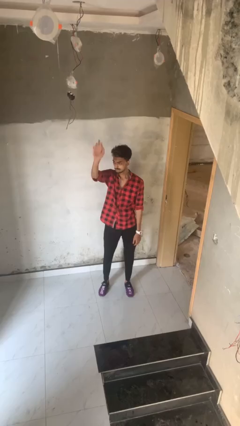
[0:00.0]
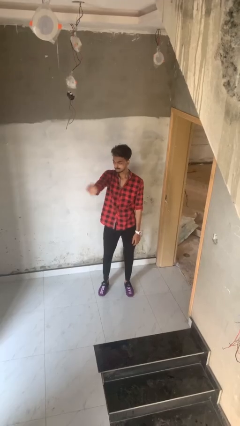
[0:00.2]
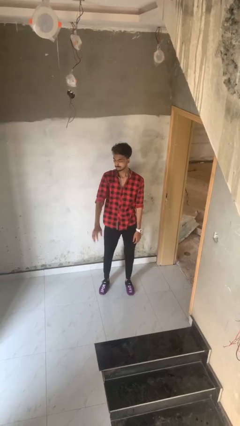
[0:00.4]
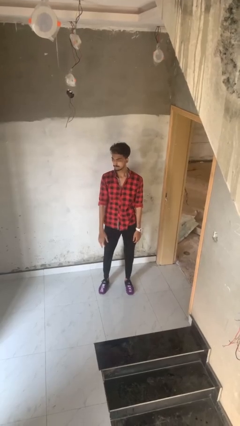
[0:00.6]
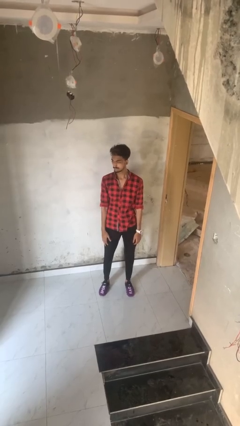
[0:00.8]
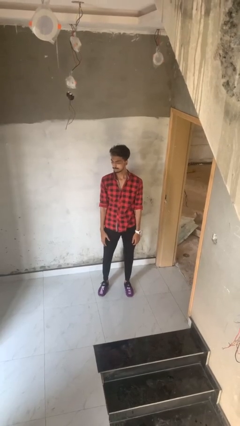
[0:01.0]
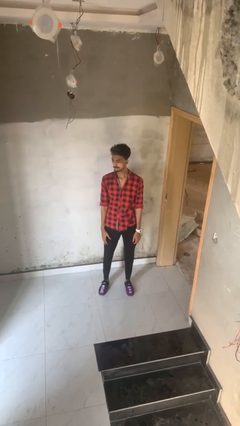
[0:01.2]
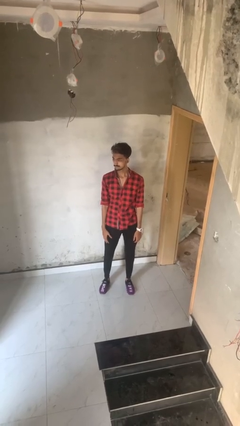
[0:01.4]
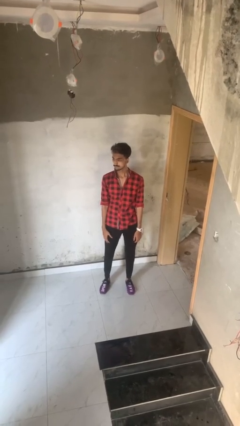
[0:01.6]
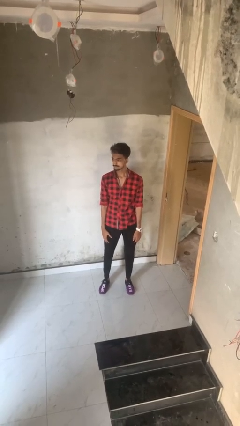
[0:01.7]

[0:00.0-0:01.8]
person gestures lower hand

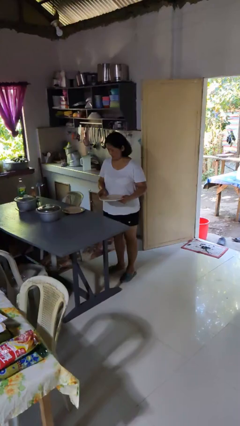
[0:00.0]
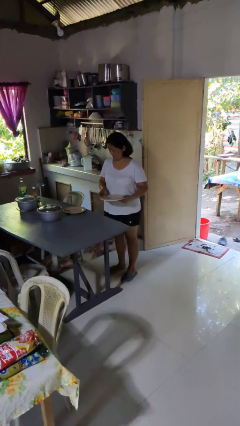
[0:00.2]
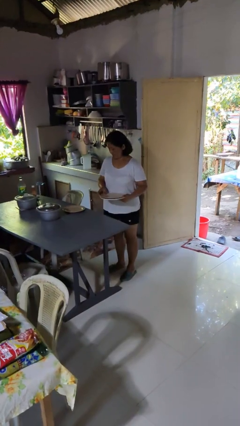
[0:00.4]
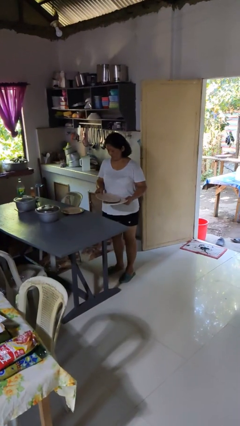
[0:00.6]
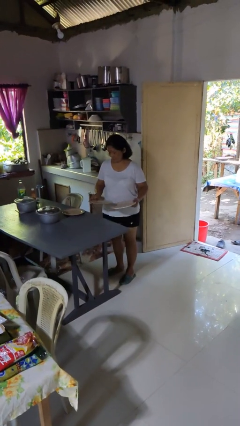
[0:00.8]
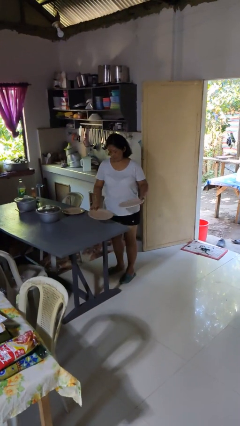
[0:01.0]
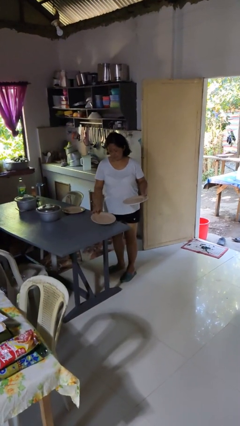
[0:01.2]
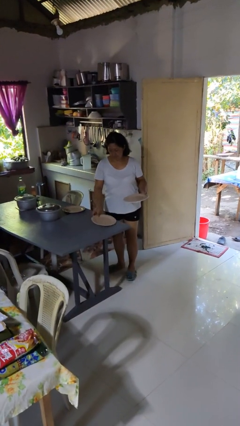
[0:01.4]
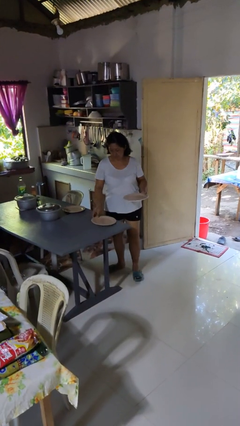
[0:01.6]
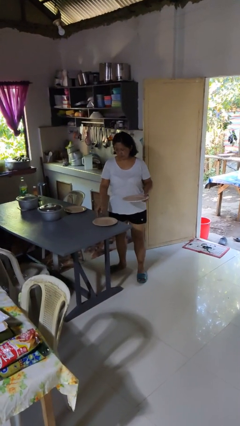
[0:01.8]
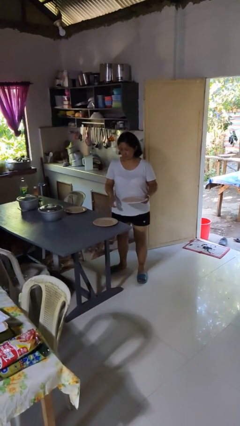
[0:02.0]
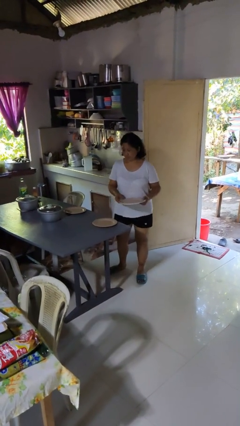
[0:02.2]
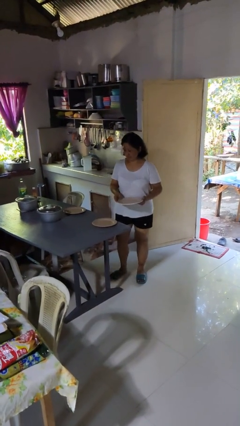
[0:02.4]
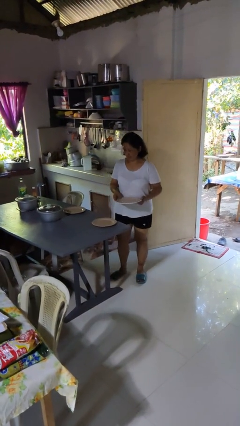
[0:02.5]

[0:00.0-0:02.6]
person sets table

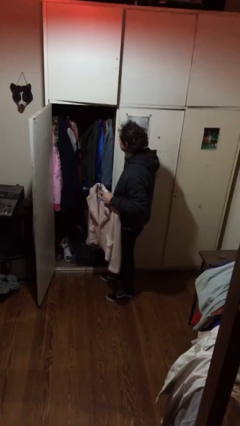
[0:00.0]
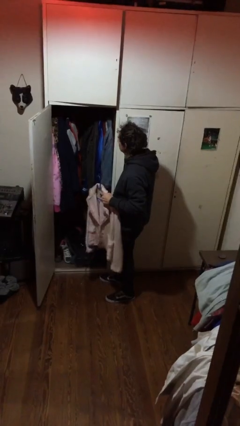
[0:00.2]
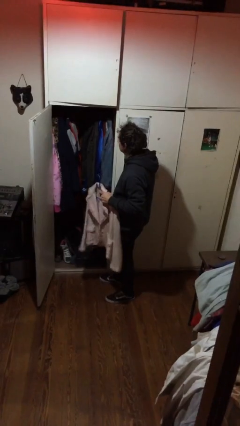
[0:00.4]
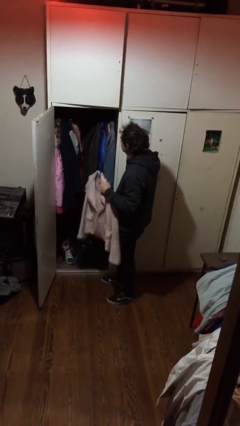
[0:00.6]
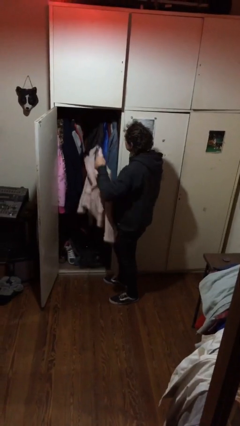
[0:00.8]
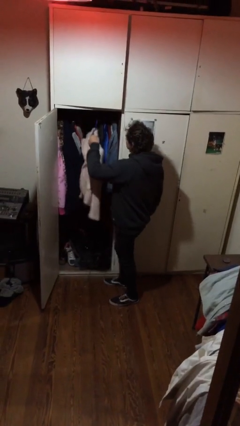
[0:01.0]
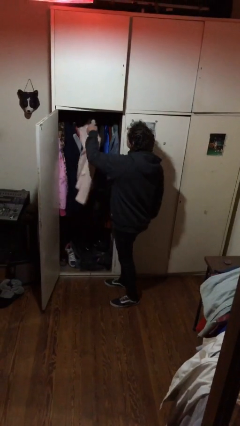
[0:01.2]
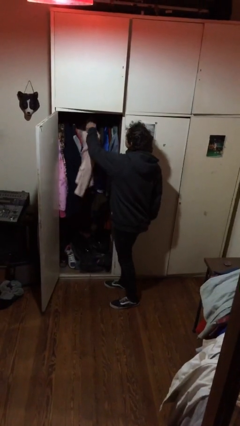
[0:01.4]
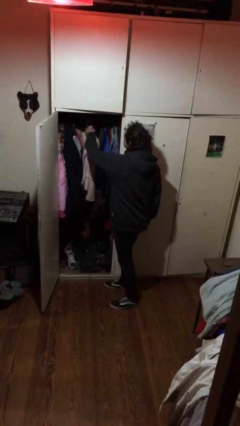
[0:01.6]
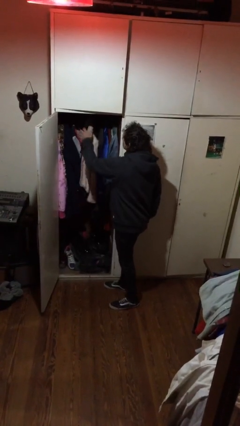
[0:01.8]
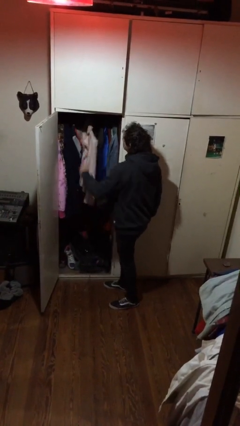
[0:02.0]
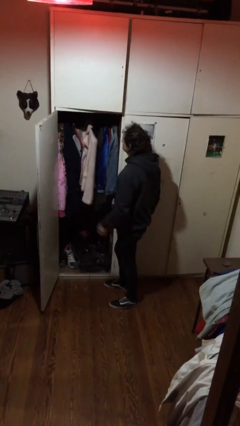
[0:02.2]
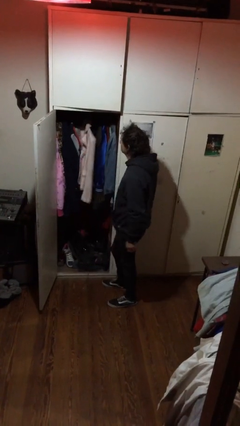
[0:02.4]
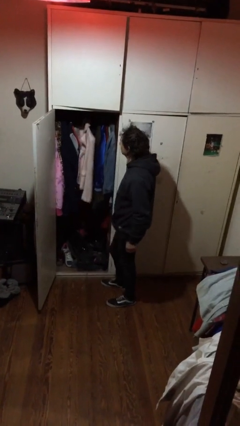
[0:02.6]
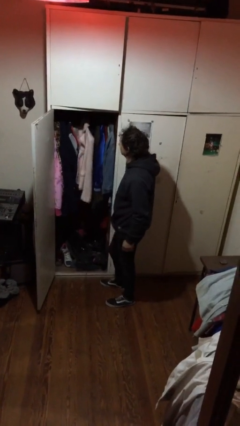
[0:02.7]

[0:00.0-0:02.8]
person puts clothes into closet

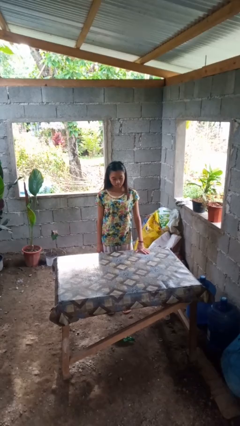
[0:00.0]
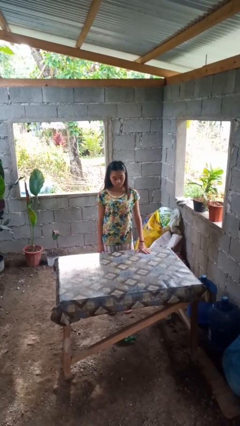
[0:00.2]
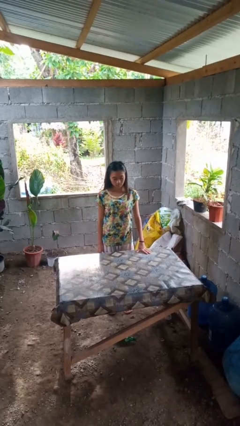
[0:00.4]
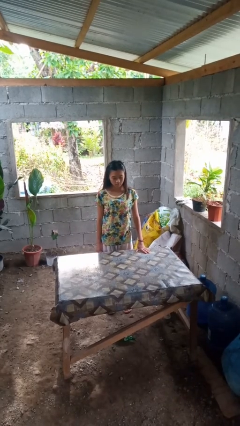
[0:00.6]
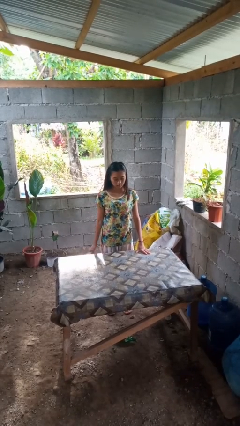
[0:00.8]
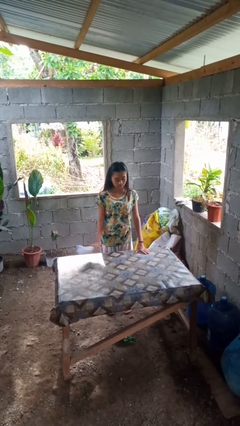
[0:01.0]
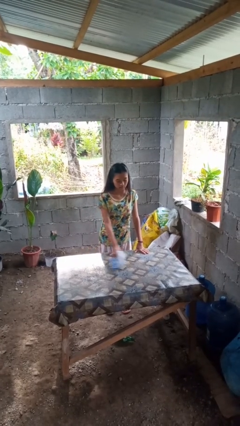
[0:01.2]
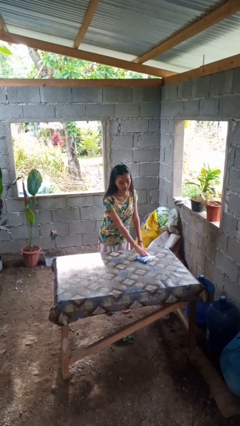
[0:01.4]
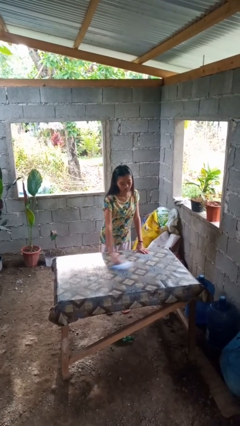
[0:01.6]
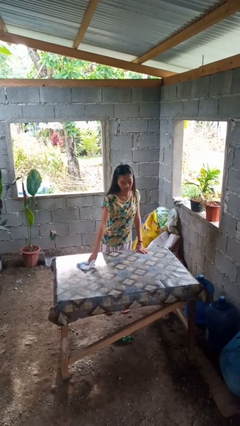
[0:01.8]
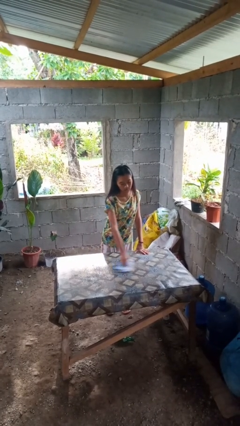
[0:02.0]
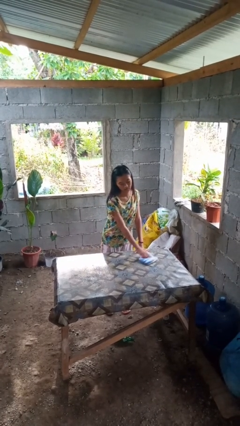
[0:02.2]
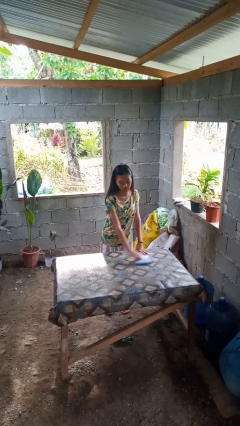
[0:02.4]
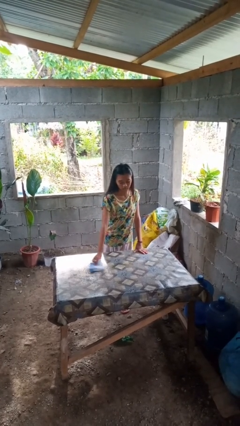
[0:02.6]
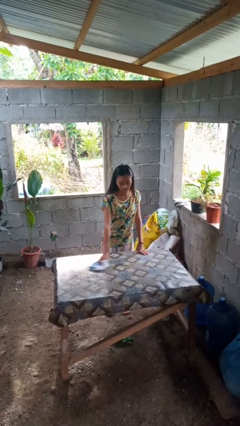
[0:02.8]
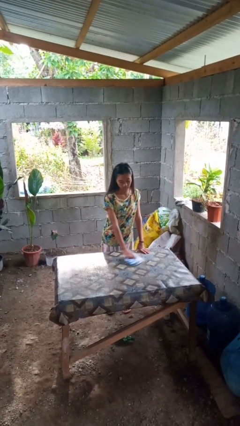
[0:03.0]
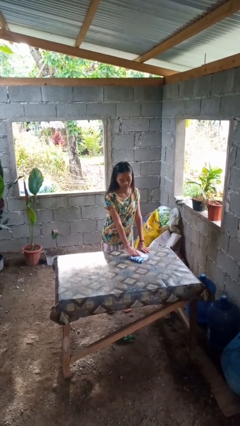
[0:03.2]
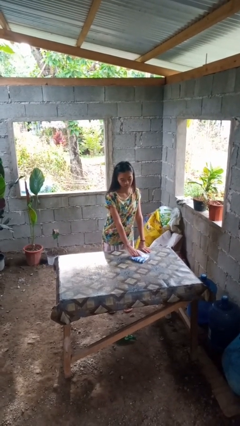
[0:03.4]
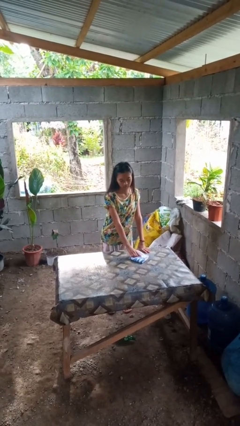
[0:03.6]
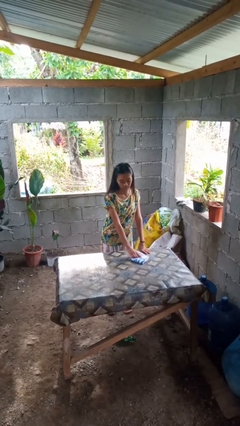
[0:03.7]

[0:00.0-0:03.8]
person cleans table with rag

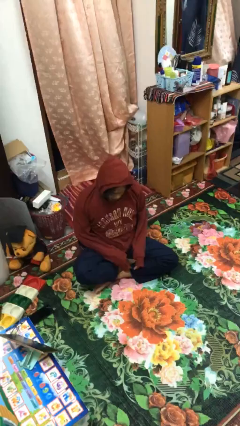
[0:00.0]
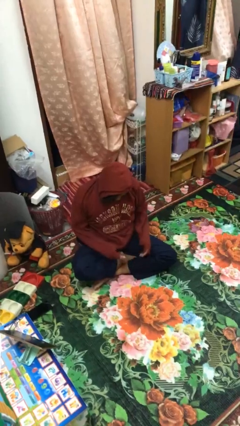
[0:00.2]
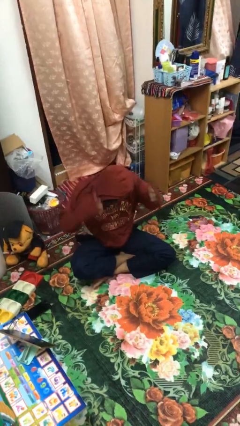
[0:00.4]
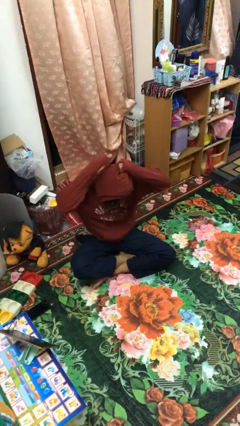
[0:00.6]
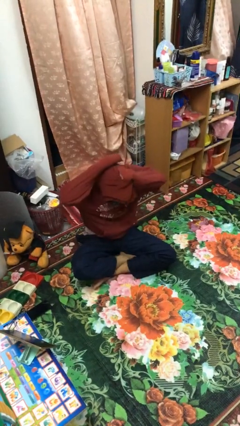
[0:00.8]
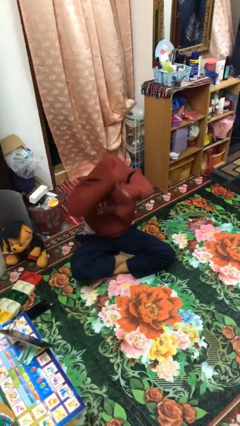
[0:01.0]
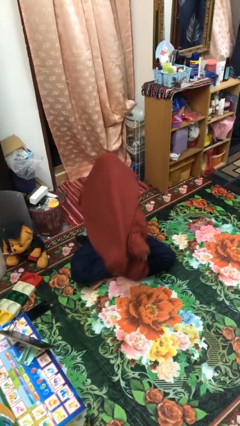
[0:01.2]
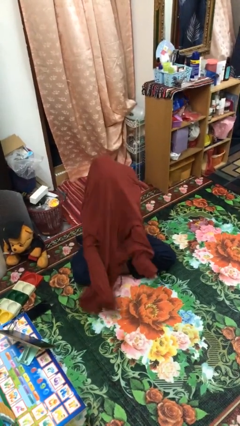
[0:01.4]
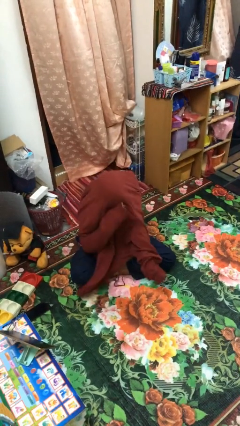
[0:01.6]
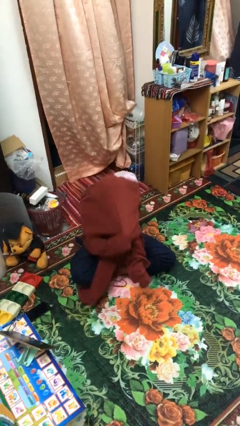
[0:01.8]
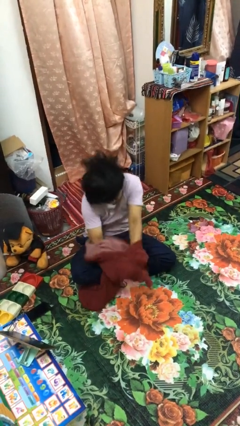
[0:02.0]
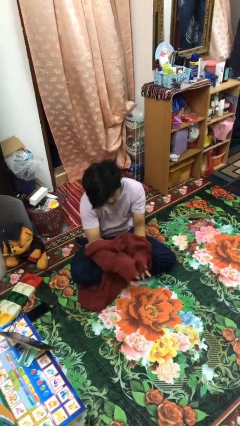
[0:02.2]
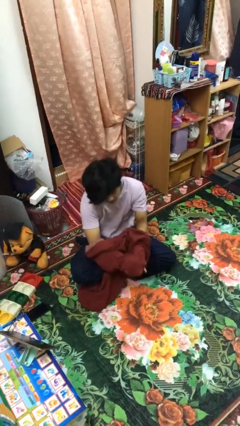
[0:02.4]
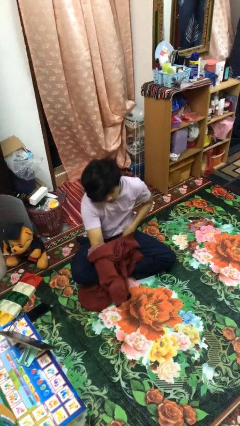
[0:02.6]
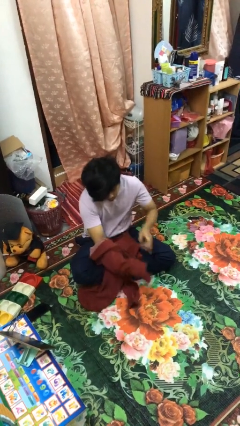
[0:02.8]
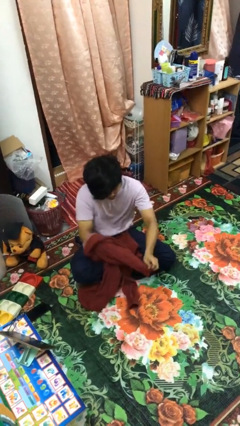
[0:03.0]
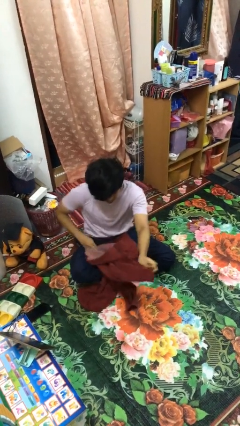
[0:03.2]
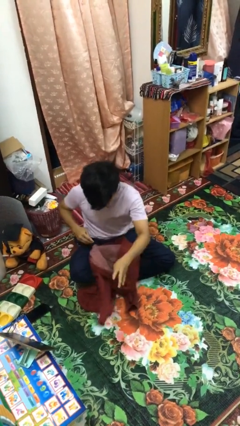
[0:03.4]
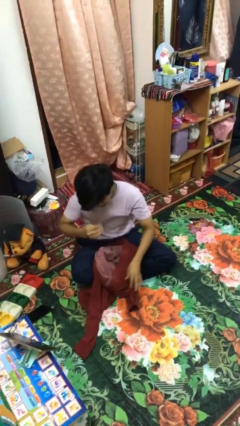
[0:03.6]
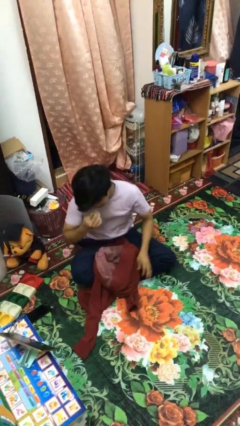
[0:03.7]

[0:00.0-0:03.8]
person takes off hoodie

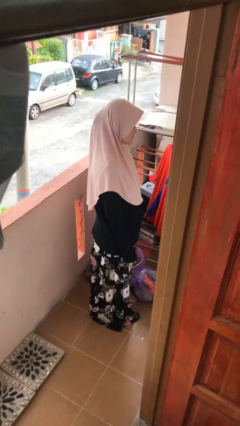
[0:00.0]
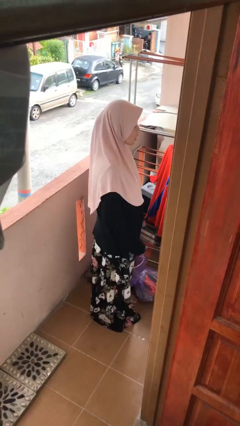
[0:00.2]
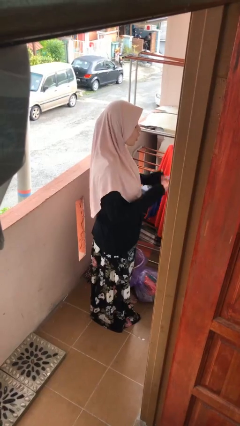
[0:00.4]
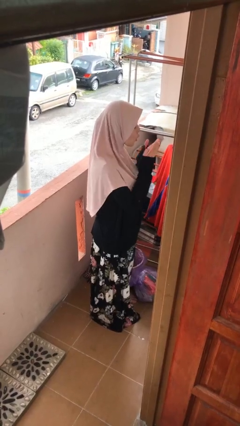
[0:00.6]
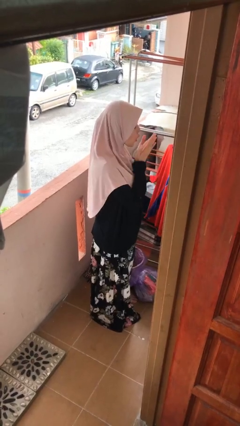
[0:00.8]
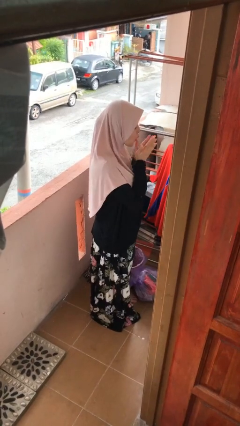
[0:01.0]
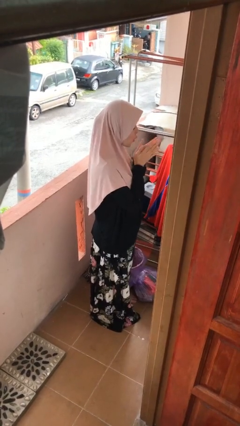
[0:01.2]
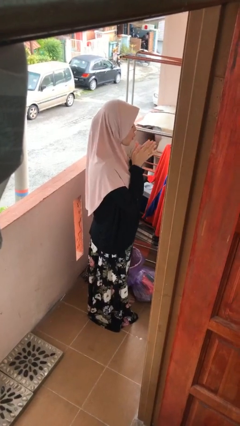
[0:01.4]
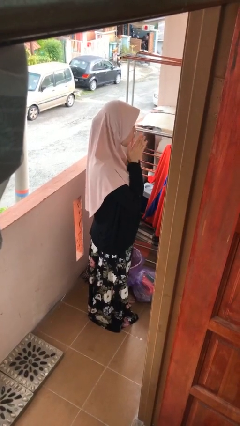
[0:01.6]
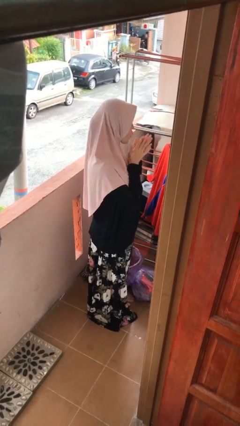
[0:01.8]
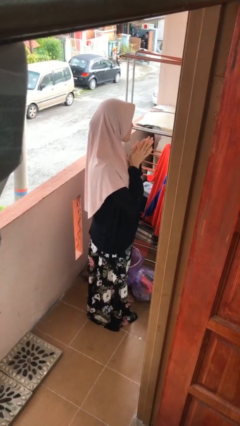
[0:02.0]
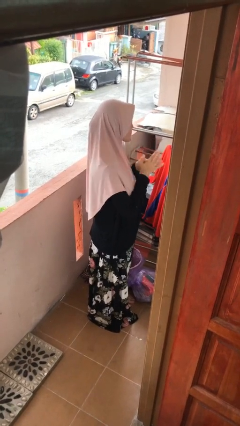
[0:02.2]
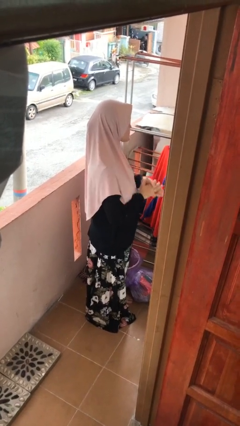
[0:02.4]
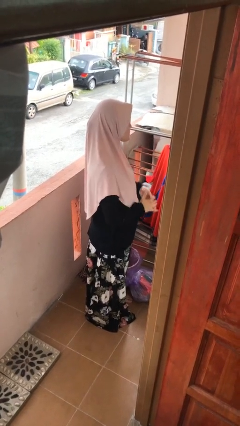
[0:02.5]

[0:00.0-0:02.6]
person blows into hands

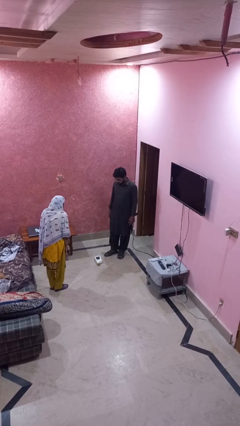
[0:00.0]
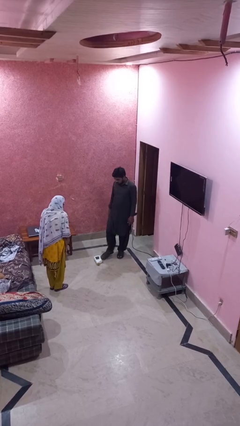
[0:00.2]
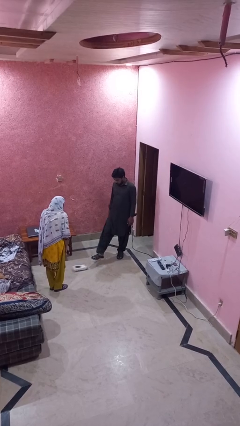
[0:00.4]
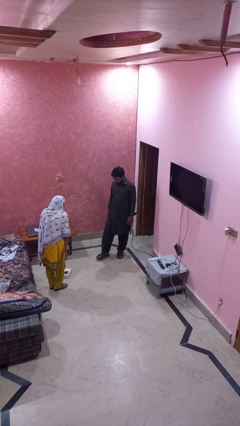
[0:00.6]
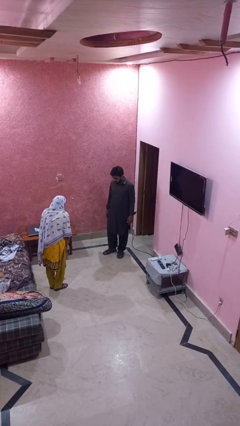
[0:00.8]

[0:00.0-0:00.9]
person kicks object to person
